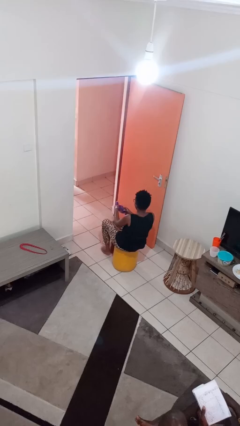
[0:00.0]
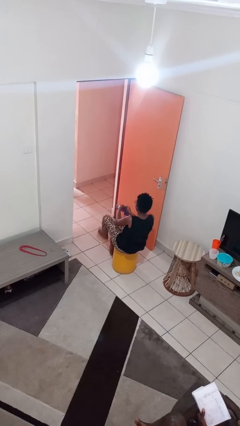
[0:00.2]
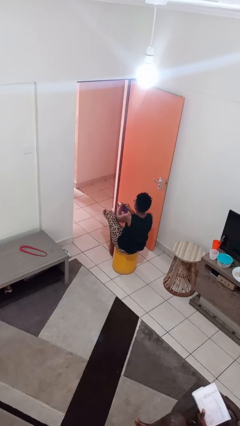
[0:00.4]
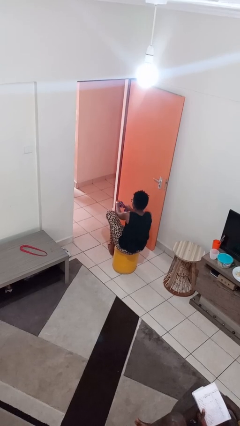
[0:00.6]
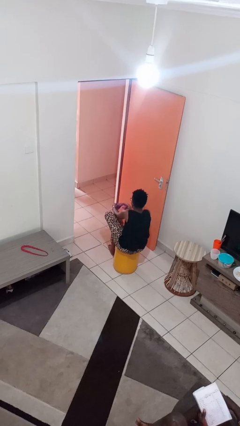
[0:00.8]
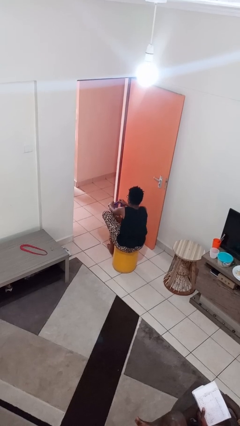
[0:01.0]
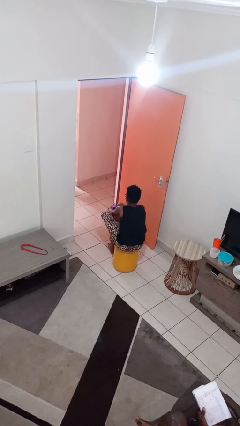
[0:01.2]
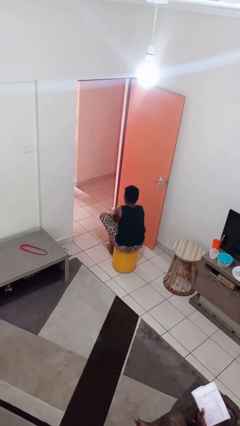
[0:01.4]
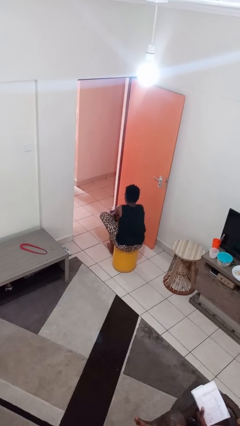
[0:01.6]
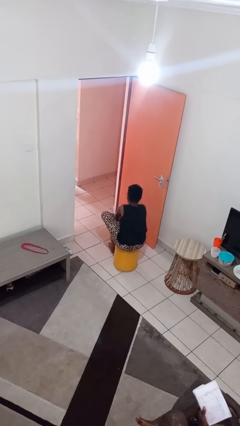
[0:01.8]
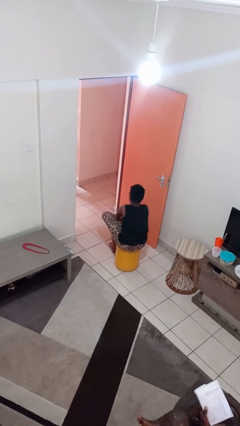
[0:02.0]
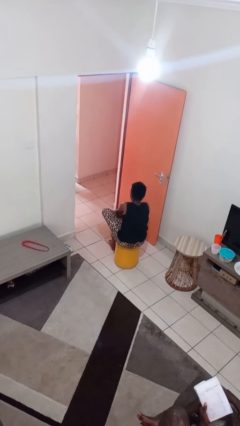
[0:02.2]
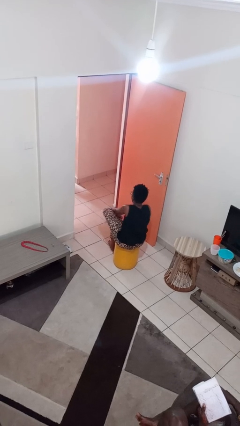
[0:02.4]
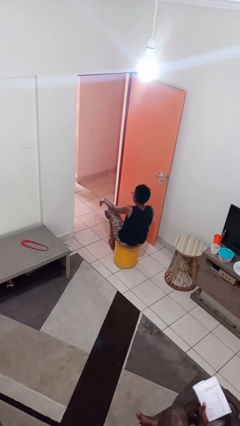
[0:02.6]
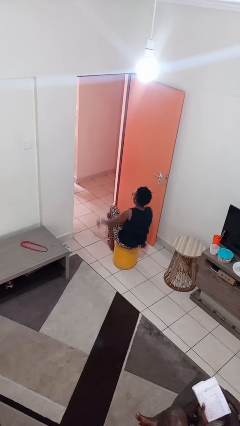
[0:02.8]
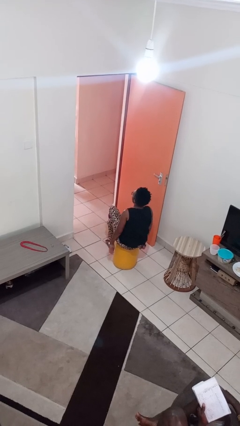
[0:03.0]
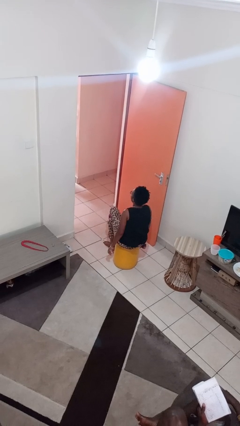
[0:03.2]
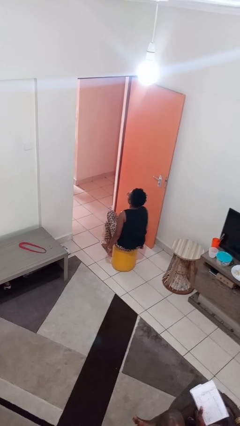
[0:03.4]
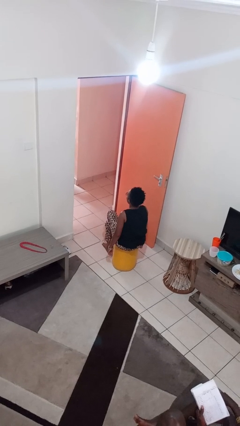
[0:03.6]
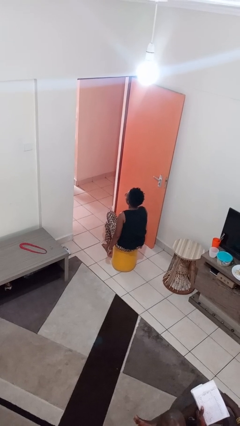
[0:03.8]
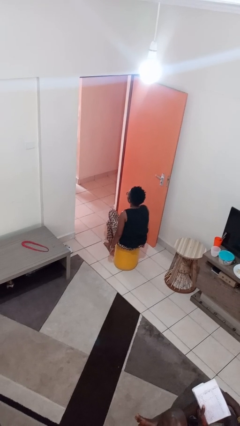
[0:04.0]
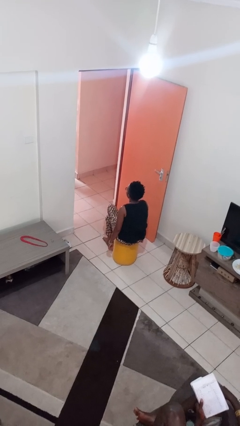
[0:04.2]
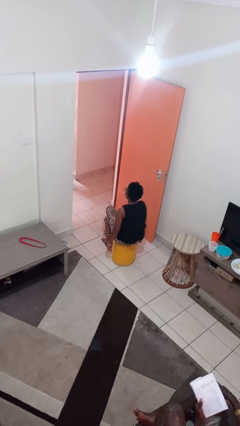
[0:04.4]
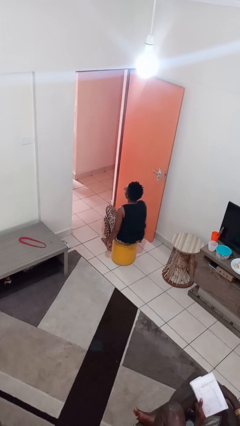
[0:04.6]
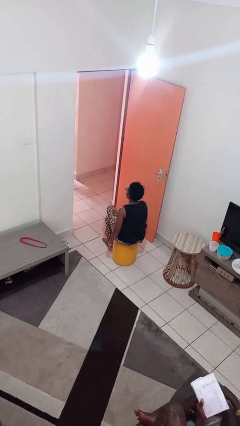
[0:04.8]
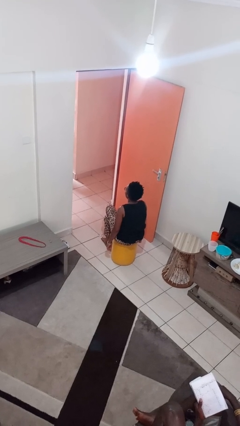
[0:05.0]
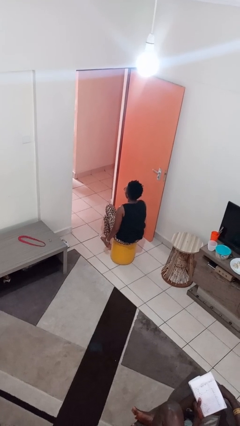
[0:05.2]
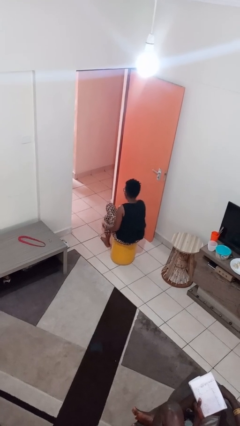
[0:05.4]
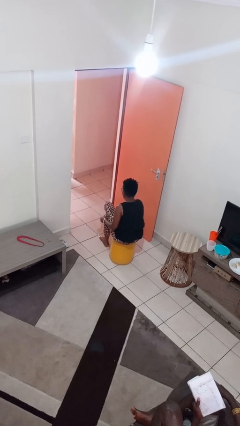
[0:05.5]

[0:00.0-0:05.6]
person puts on socks

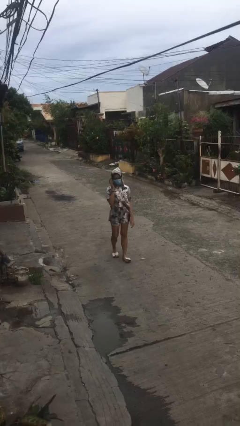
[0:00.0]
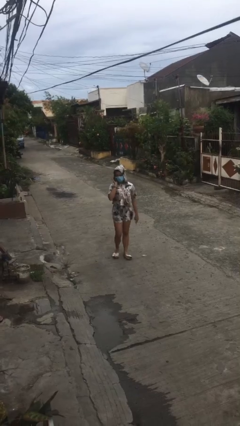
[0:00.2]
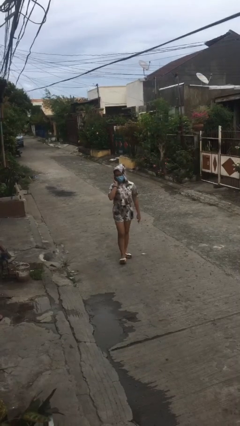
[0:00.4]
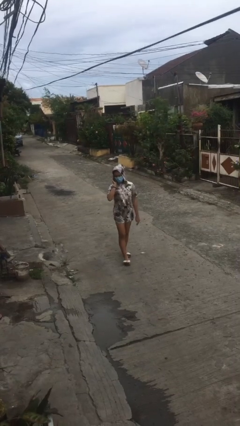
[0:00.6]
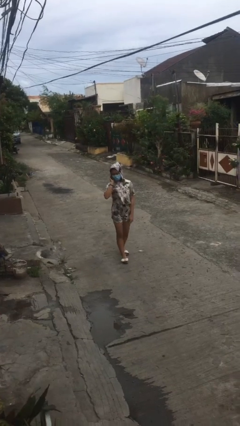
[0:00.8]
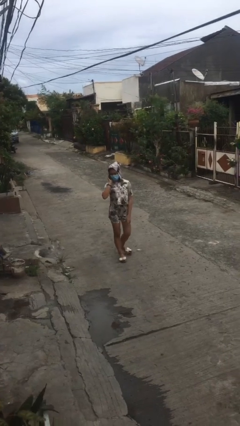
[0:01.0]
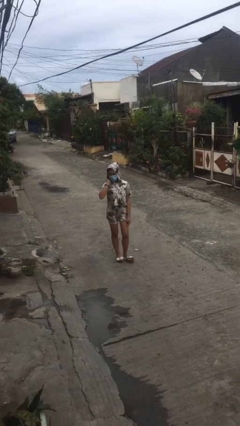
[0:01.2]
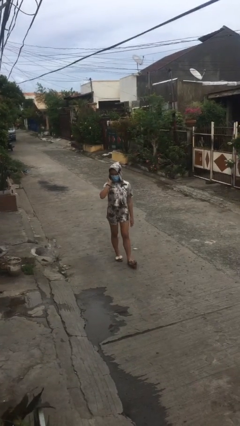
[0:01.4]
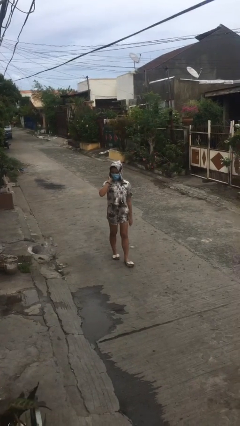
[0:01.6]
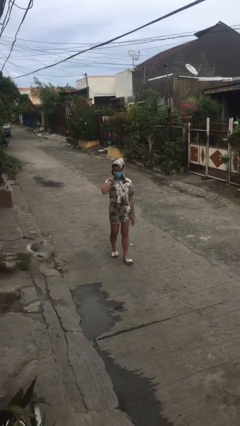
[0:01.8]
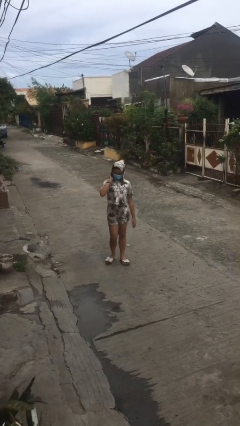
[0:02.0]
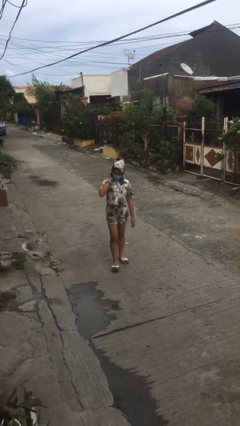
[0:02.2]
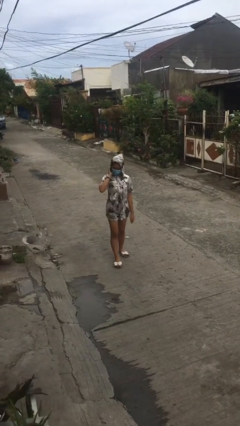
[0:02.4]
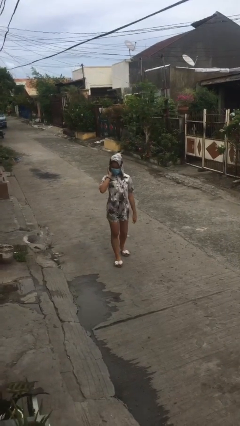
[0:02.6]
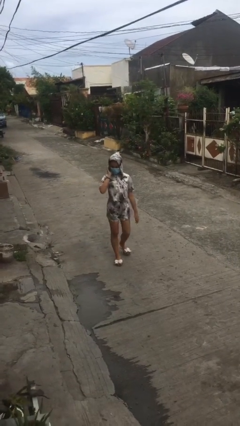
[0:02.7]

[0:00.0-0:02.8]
person talks on phone

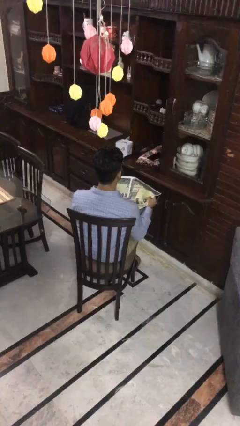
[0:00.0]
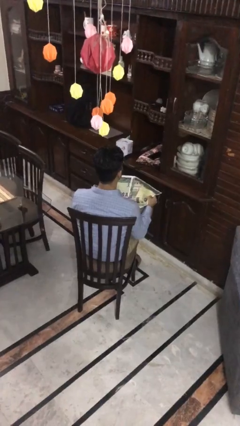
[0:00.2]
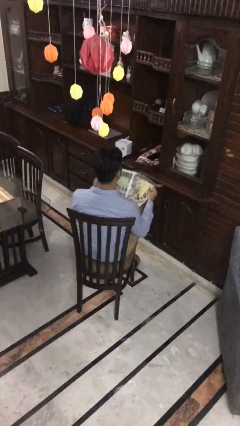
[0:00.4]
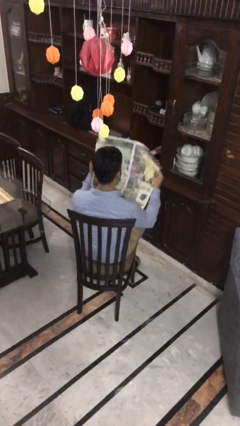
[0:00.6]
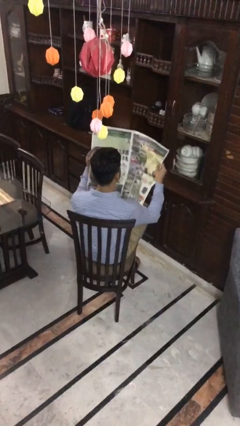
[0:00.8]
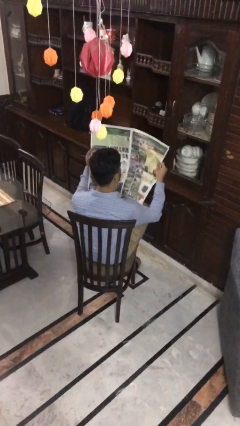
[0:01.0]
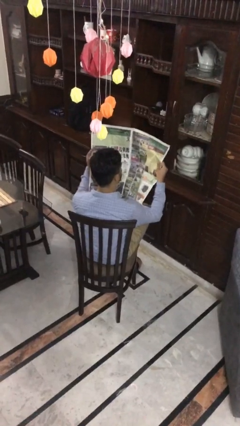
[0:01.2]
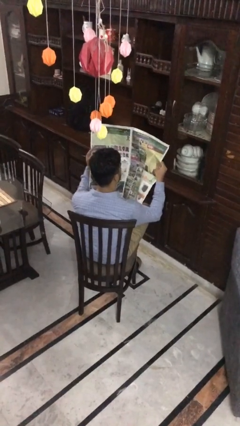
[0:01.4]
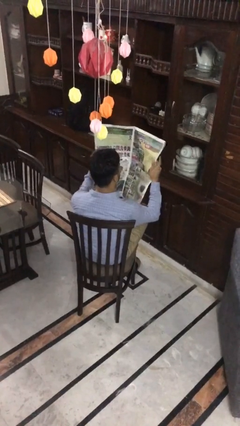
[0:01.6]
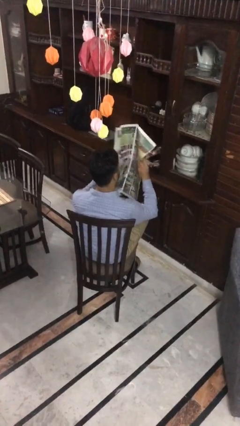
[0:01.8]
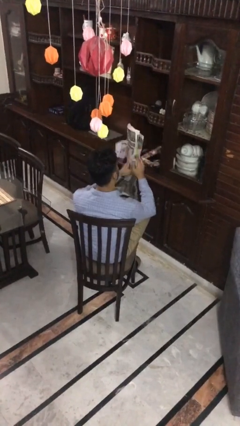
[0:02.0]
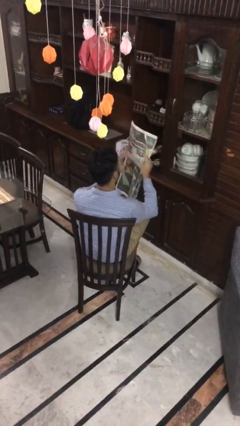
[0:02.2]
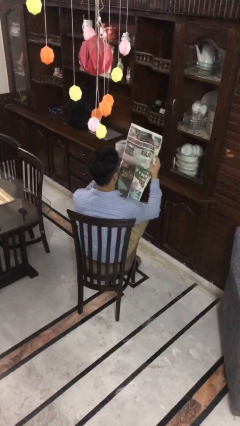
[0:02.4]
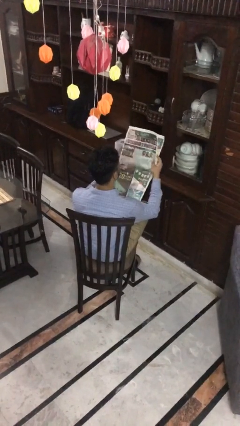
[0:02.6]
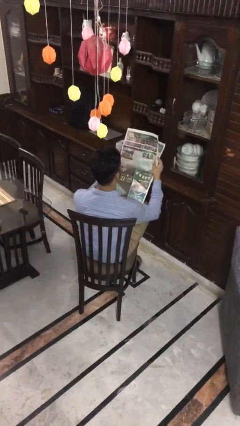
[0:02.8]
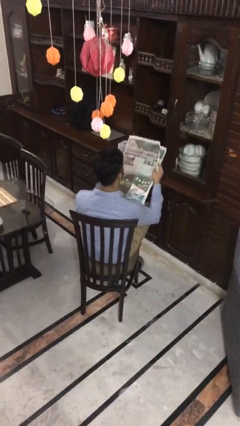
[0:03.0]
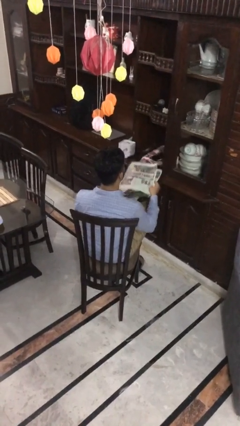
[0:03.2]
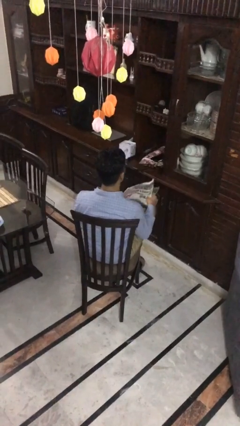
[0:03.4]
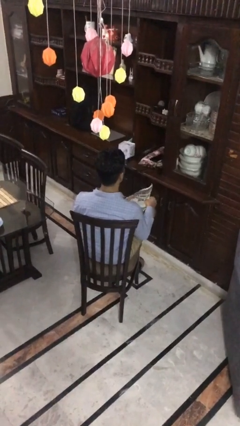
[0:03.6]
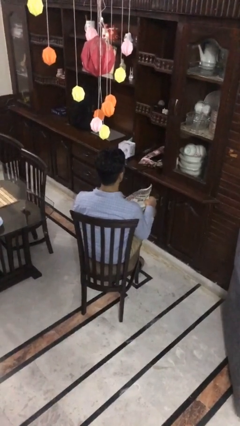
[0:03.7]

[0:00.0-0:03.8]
person reads newspaper

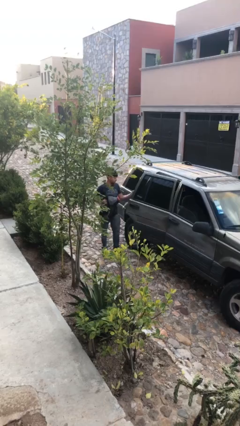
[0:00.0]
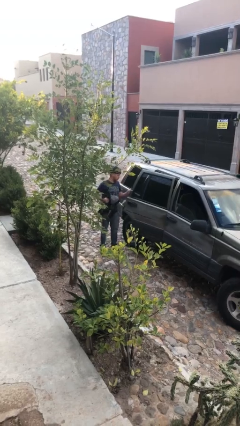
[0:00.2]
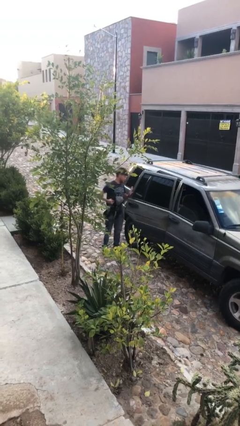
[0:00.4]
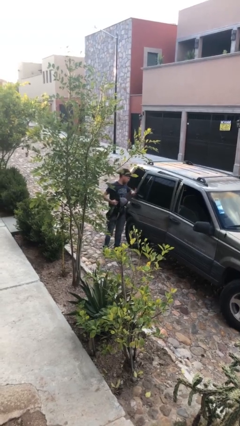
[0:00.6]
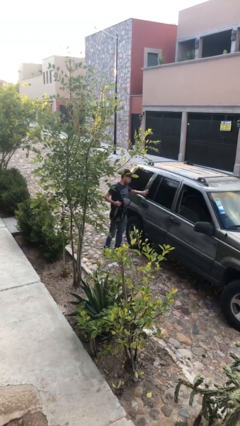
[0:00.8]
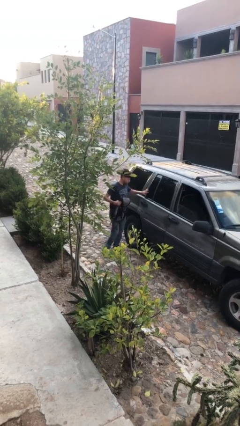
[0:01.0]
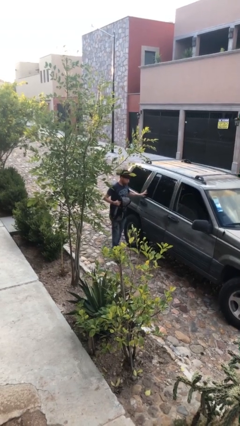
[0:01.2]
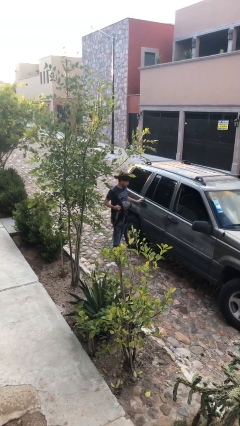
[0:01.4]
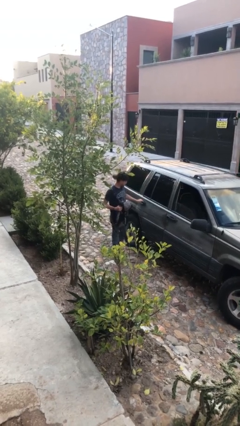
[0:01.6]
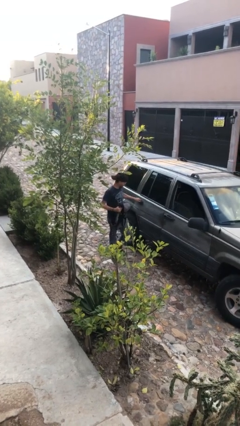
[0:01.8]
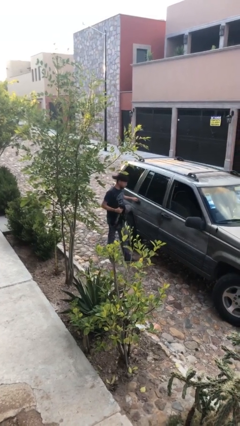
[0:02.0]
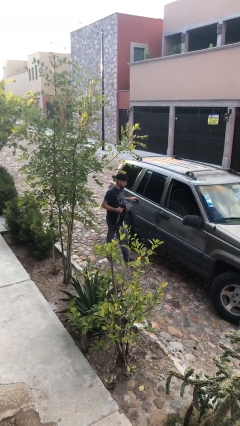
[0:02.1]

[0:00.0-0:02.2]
person closes car door

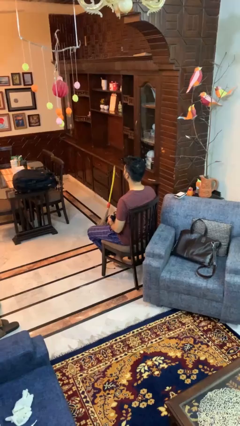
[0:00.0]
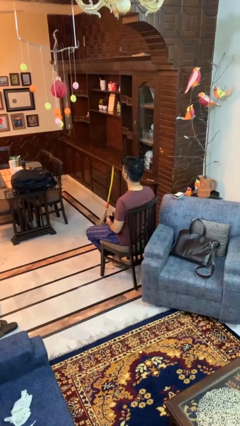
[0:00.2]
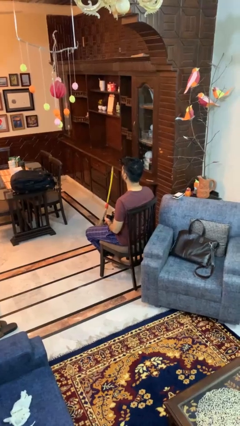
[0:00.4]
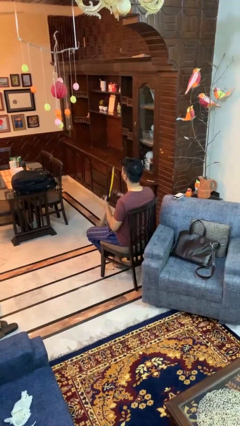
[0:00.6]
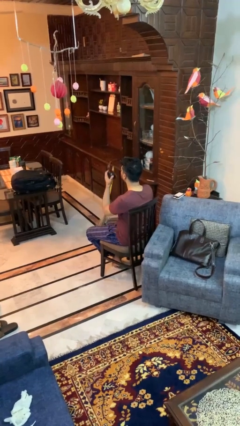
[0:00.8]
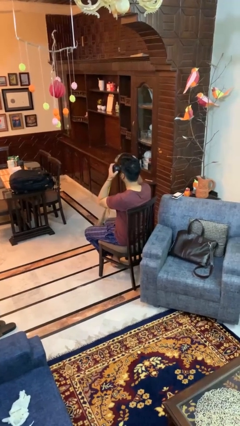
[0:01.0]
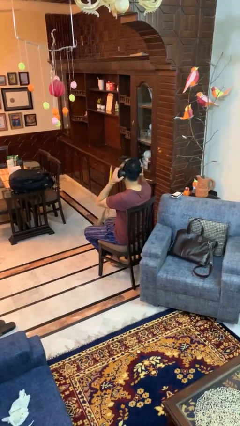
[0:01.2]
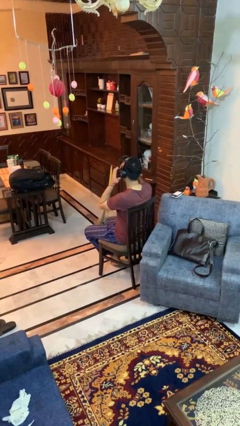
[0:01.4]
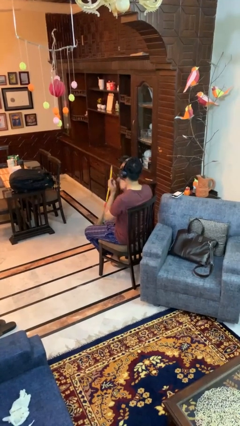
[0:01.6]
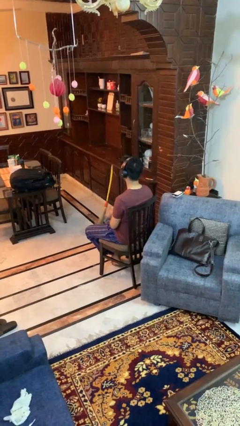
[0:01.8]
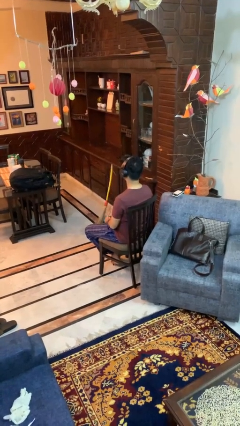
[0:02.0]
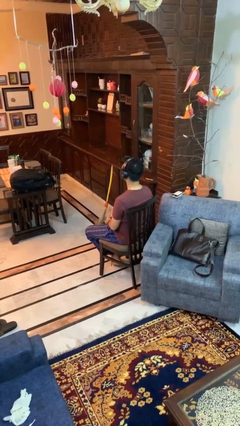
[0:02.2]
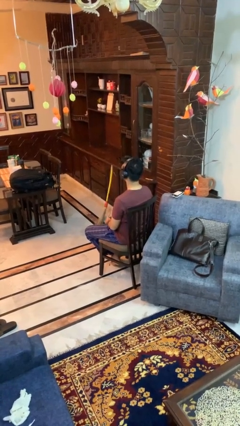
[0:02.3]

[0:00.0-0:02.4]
person puts on headphones

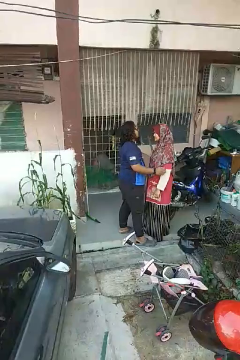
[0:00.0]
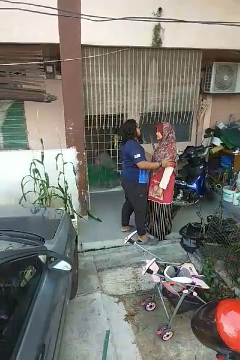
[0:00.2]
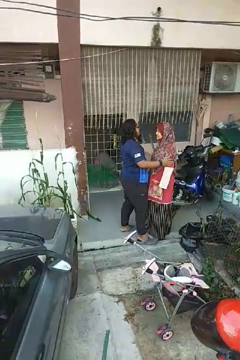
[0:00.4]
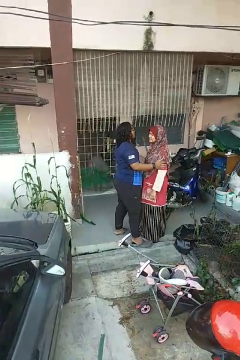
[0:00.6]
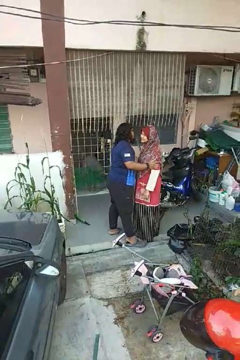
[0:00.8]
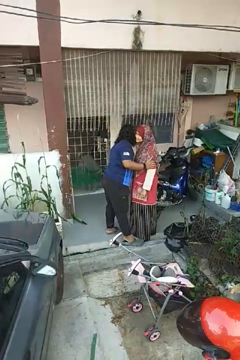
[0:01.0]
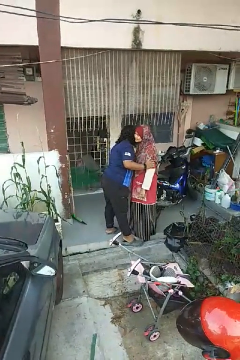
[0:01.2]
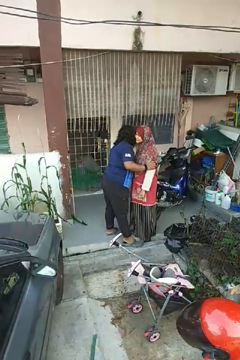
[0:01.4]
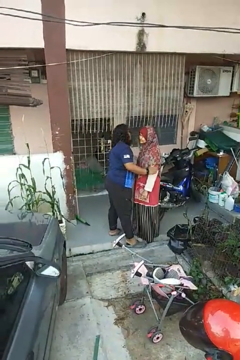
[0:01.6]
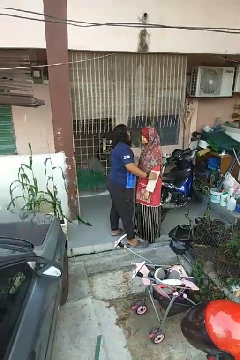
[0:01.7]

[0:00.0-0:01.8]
person kisses cheek of person
